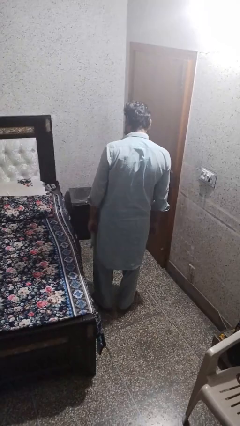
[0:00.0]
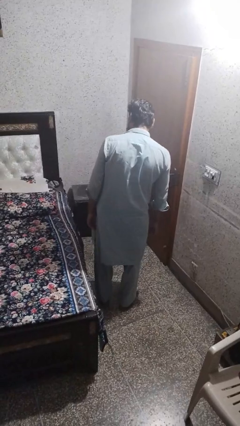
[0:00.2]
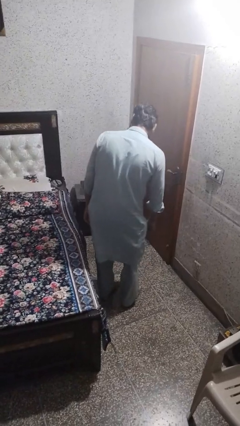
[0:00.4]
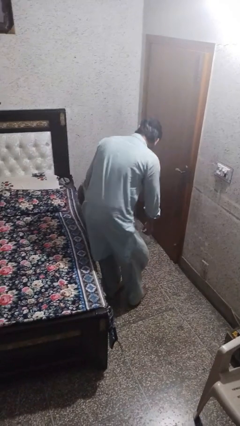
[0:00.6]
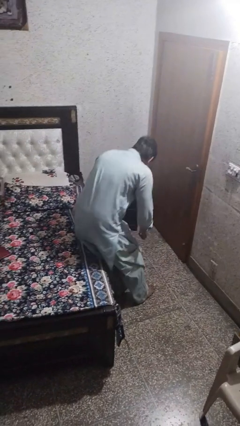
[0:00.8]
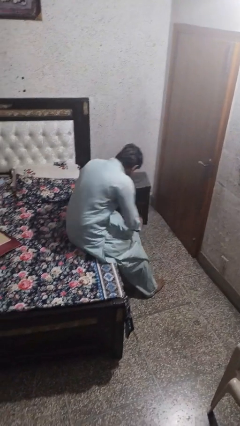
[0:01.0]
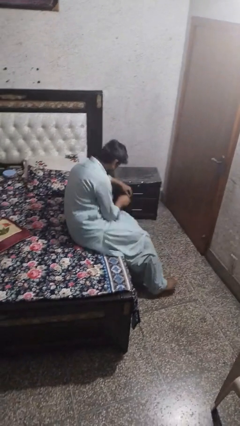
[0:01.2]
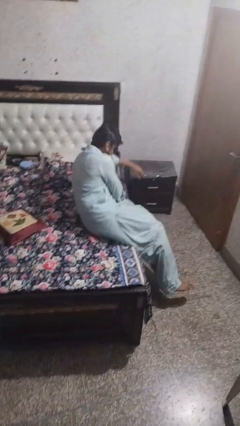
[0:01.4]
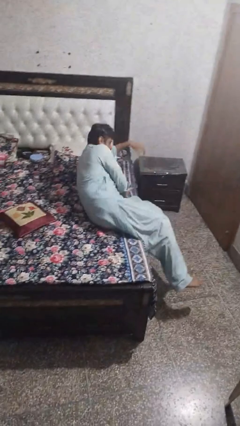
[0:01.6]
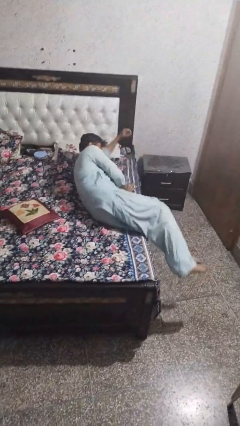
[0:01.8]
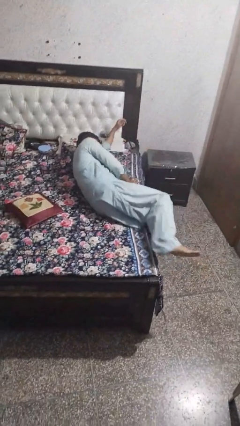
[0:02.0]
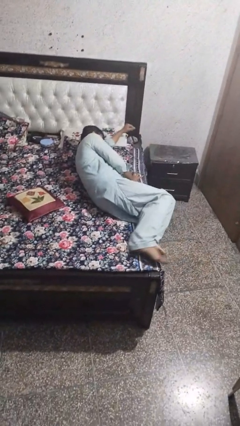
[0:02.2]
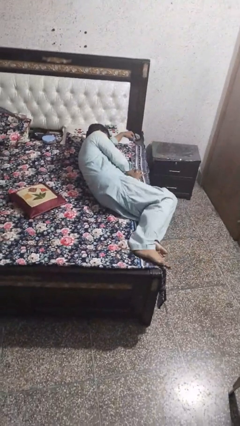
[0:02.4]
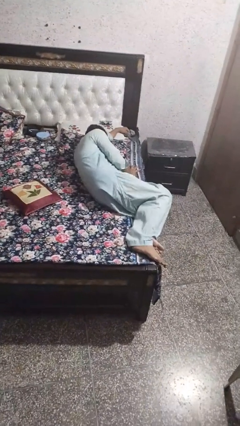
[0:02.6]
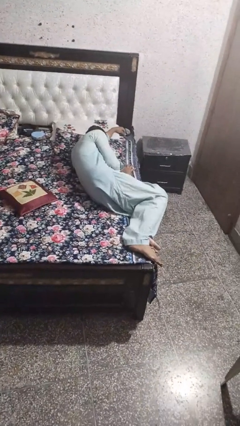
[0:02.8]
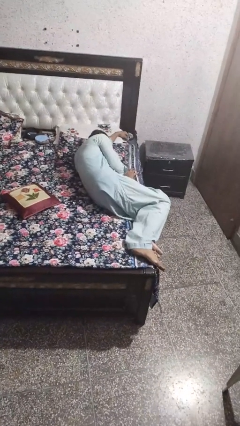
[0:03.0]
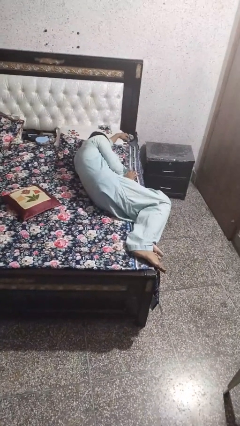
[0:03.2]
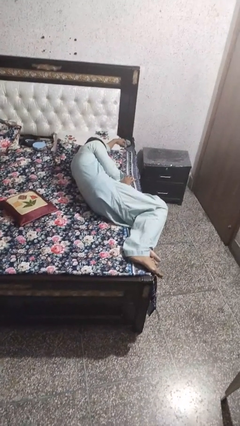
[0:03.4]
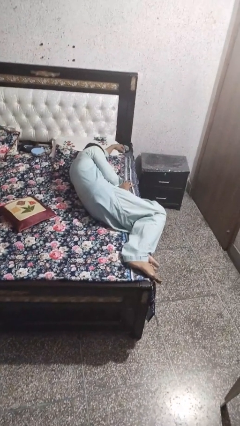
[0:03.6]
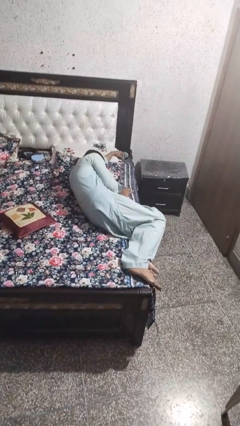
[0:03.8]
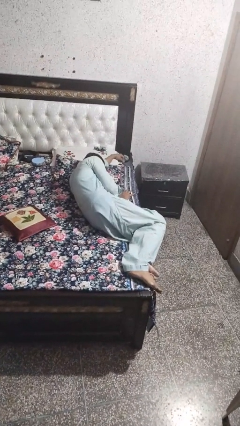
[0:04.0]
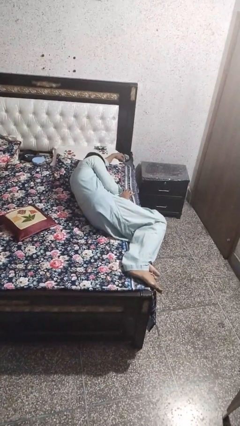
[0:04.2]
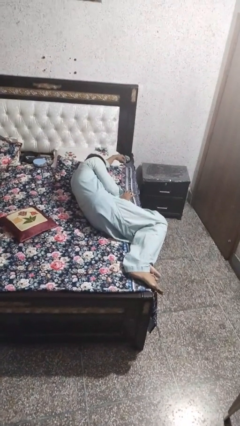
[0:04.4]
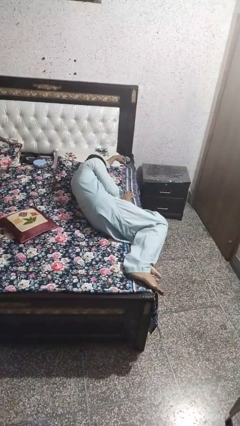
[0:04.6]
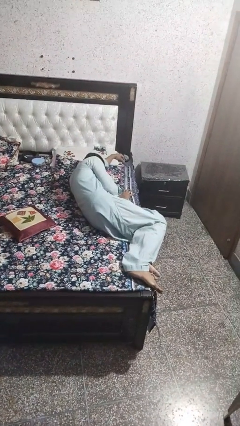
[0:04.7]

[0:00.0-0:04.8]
person lies down on bed

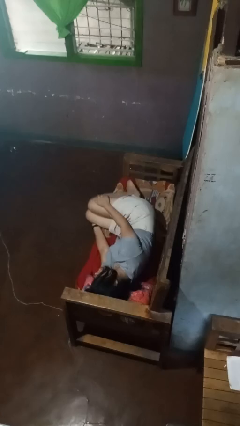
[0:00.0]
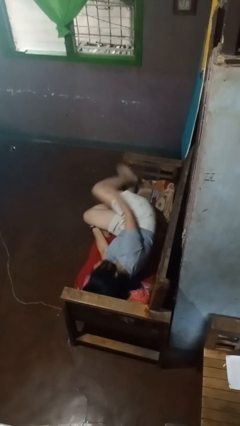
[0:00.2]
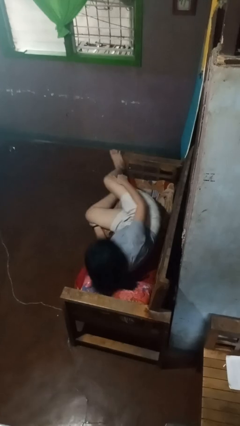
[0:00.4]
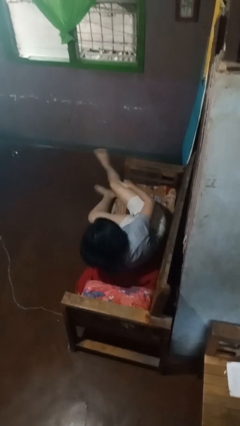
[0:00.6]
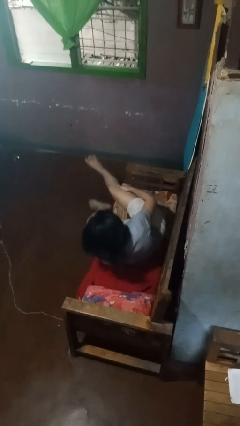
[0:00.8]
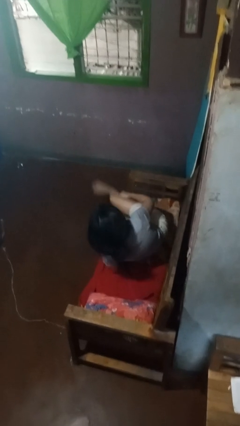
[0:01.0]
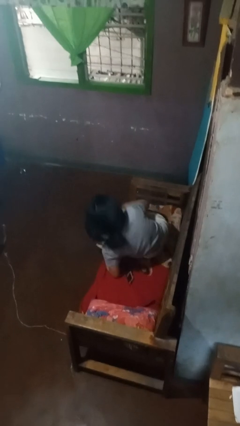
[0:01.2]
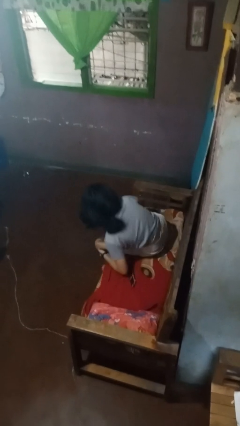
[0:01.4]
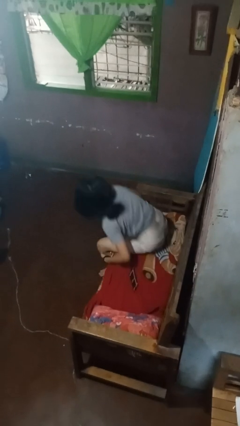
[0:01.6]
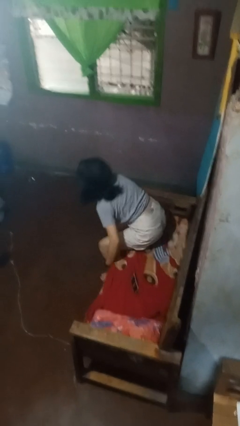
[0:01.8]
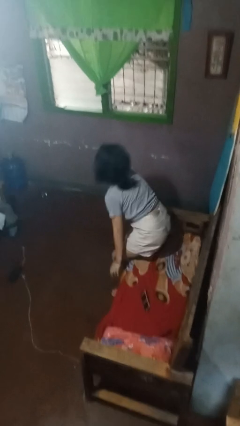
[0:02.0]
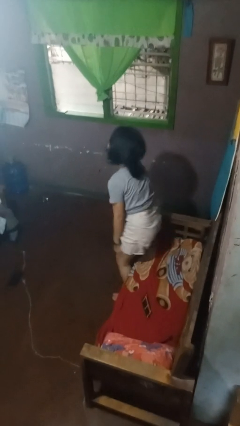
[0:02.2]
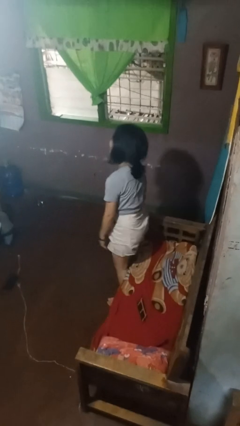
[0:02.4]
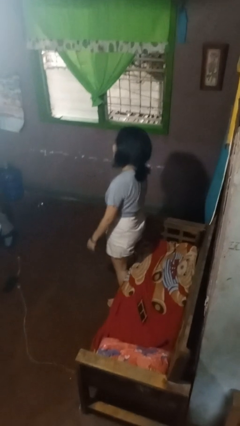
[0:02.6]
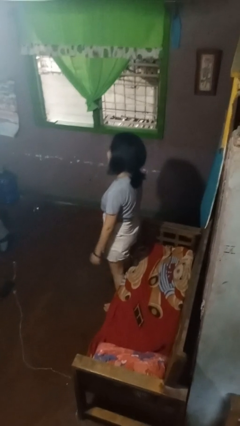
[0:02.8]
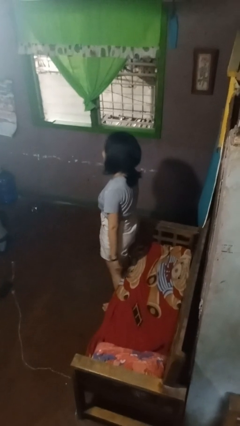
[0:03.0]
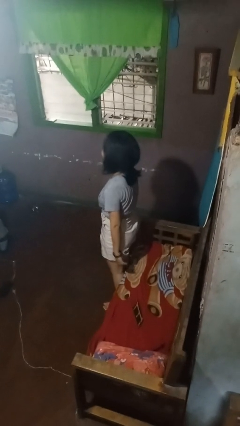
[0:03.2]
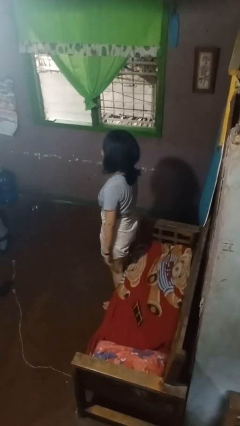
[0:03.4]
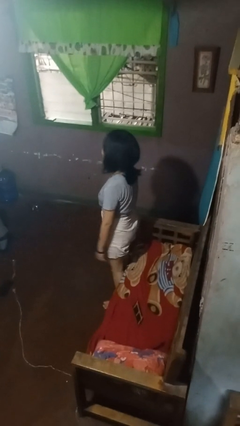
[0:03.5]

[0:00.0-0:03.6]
person stands up

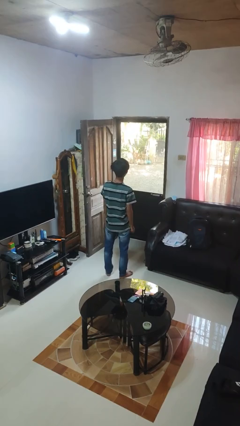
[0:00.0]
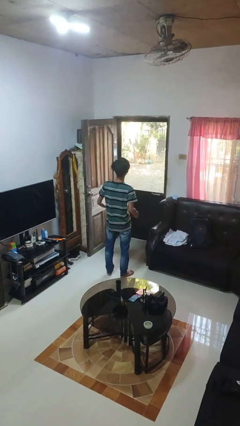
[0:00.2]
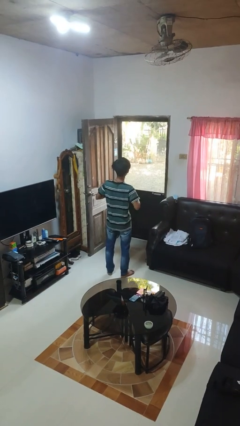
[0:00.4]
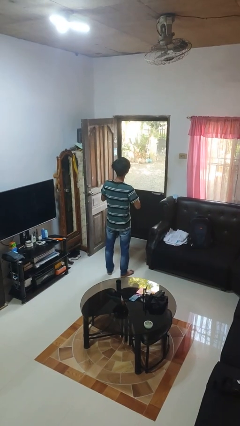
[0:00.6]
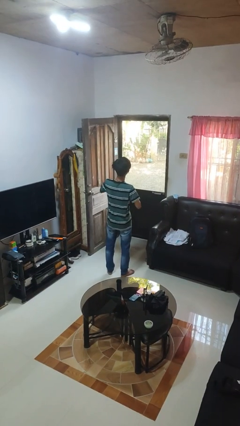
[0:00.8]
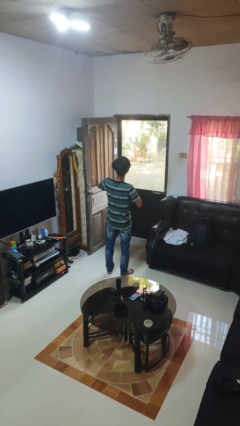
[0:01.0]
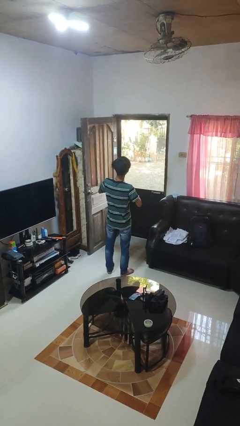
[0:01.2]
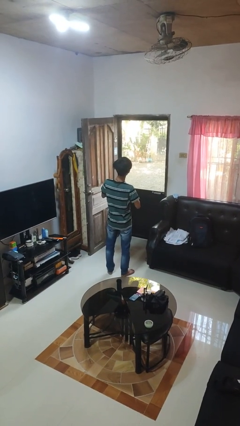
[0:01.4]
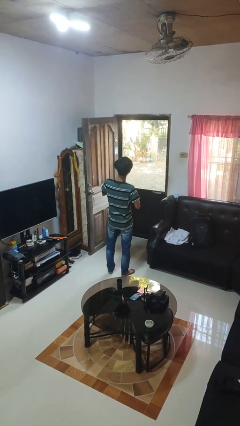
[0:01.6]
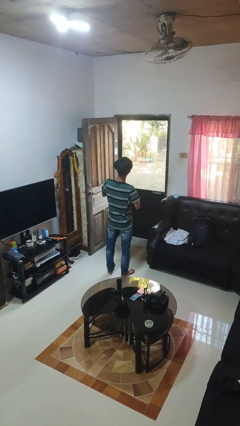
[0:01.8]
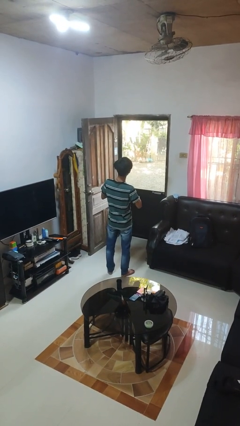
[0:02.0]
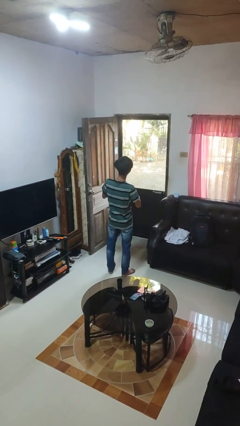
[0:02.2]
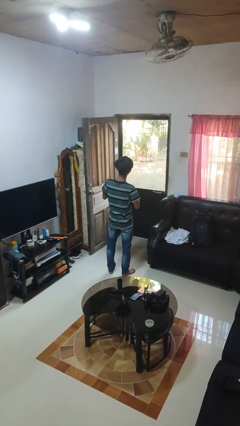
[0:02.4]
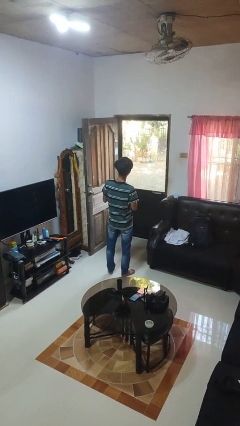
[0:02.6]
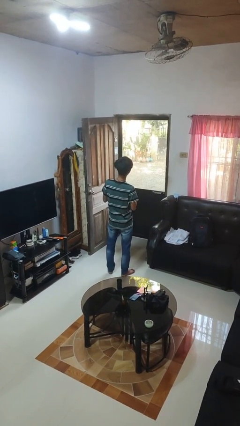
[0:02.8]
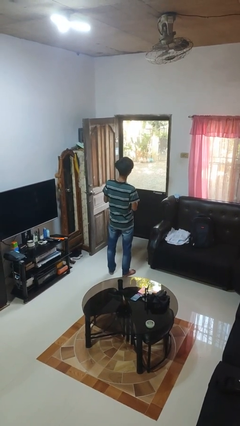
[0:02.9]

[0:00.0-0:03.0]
person buttons shirt

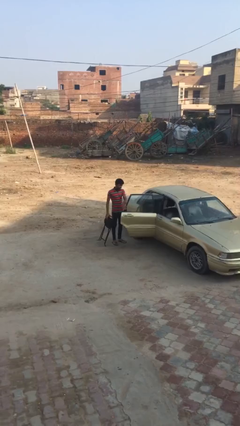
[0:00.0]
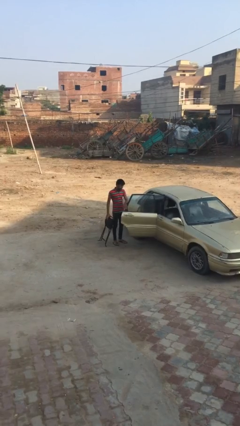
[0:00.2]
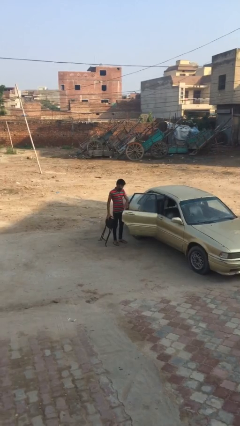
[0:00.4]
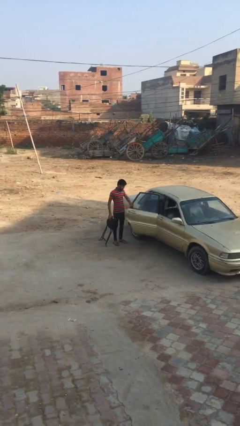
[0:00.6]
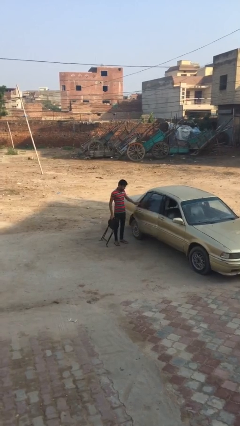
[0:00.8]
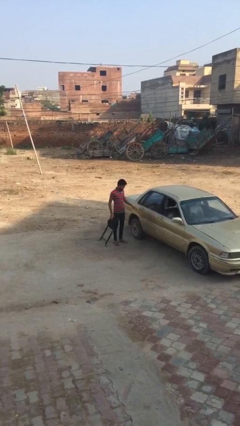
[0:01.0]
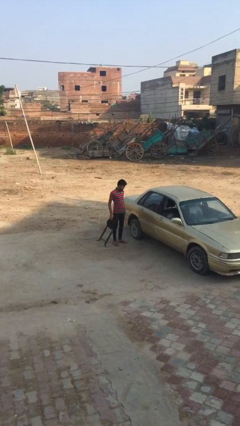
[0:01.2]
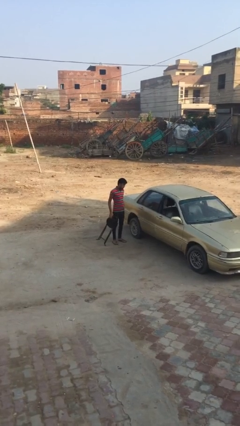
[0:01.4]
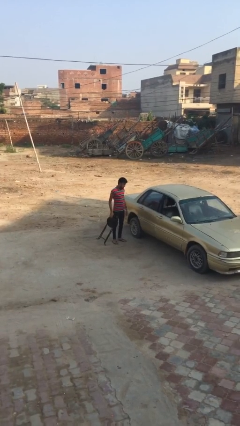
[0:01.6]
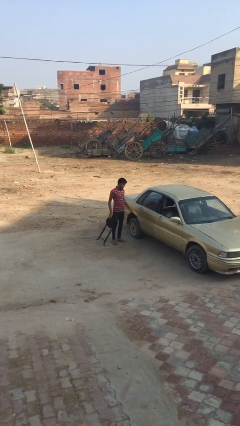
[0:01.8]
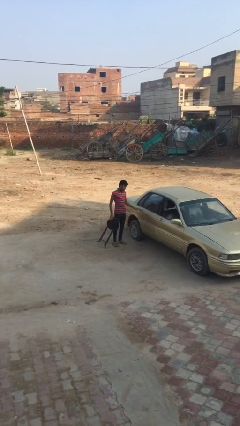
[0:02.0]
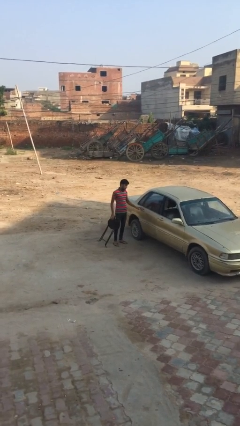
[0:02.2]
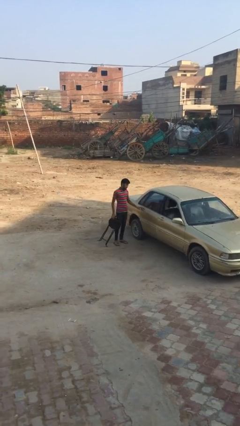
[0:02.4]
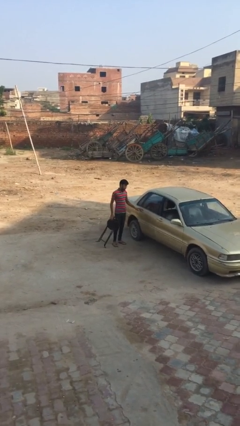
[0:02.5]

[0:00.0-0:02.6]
person closes car door

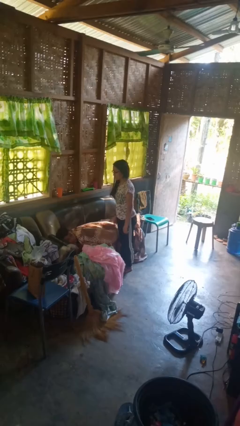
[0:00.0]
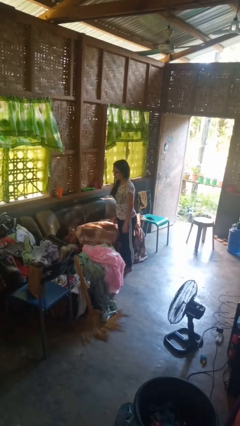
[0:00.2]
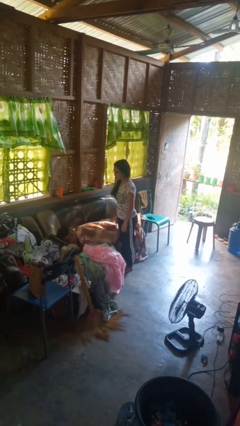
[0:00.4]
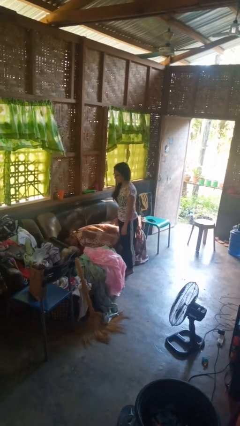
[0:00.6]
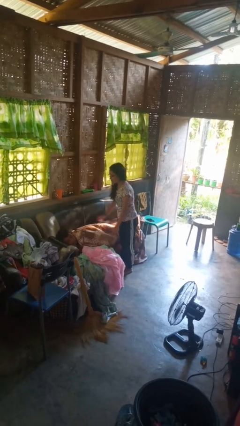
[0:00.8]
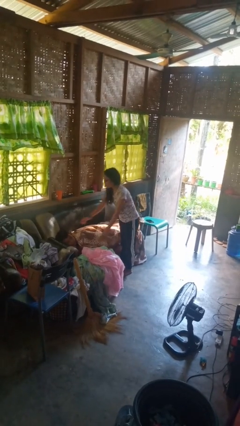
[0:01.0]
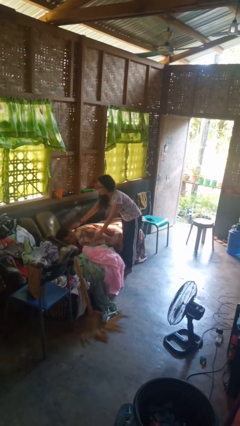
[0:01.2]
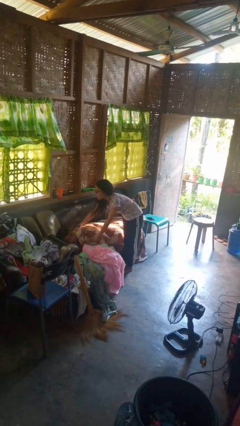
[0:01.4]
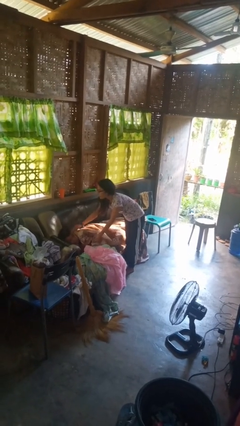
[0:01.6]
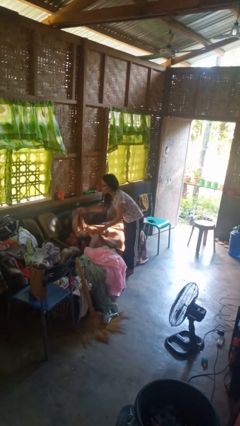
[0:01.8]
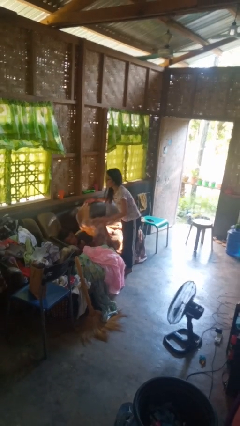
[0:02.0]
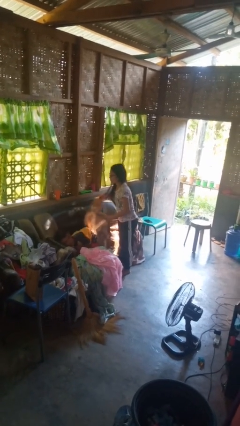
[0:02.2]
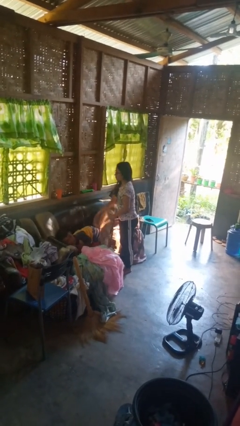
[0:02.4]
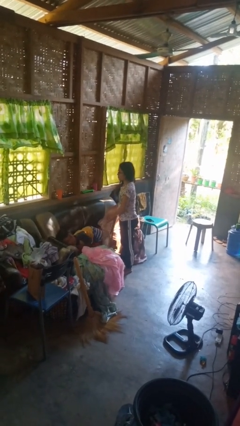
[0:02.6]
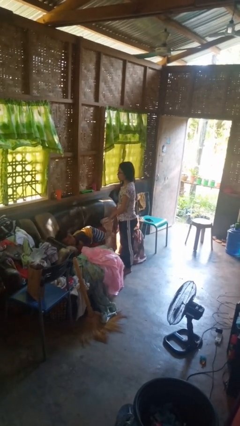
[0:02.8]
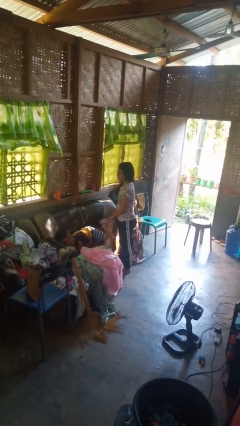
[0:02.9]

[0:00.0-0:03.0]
person uncovers friend with blanket

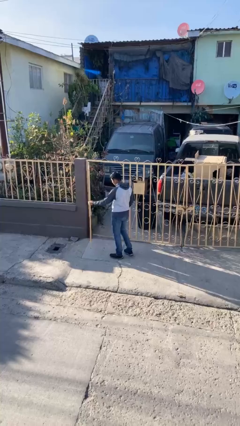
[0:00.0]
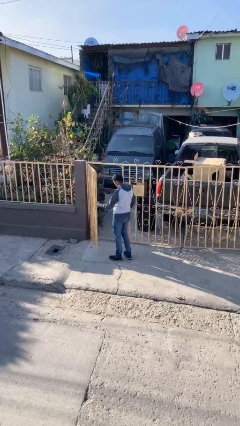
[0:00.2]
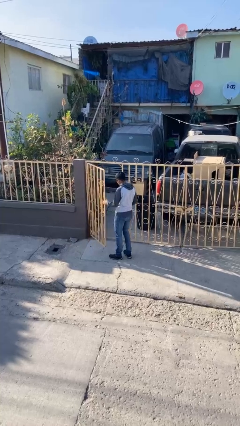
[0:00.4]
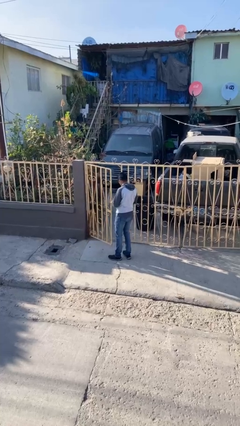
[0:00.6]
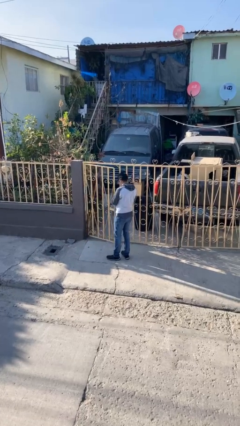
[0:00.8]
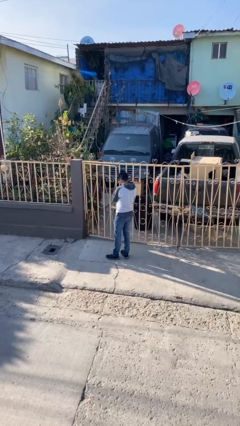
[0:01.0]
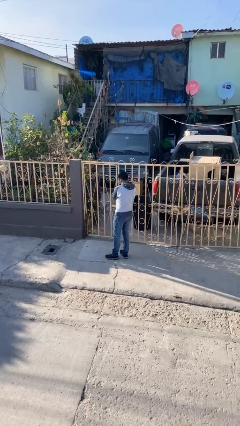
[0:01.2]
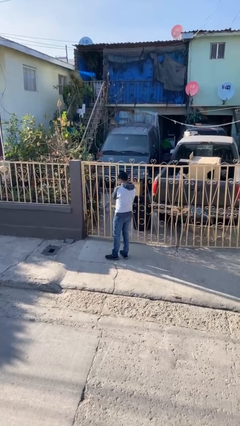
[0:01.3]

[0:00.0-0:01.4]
person closes facility door
